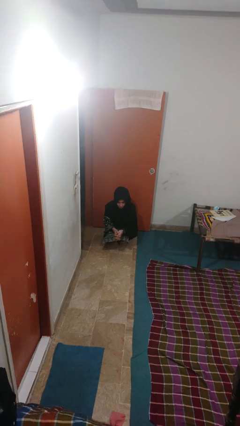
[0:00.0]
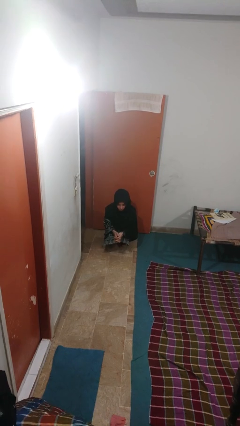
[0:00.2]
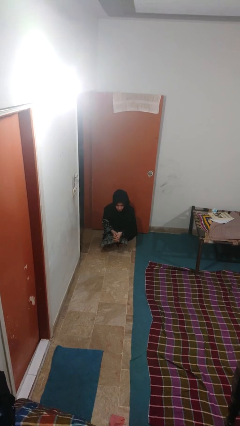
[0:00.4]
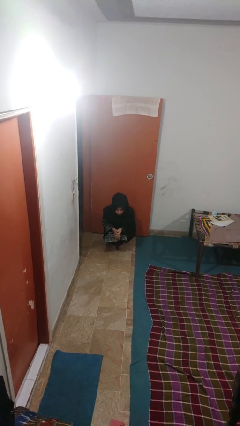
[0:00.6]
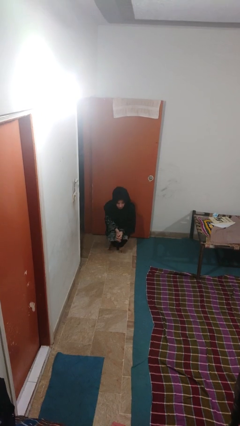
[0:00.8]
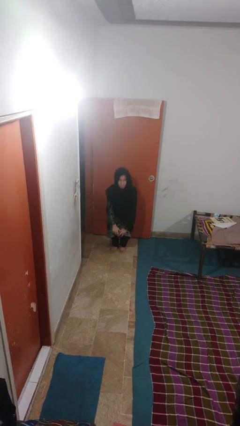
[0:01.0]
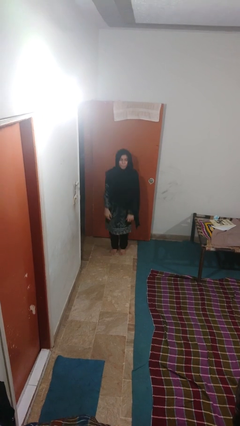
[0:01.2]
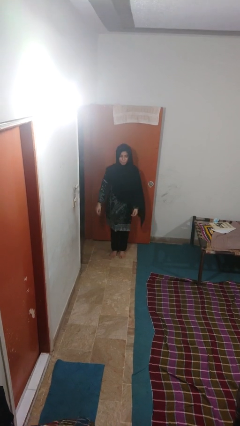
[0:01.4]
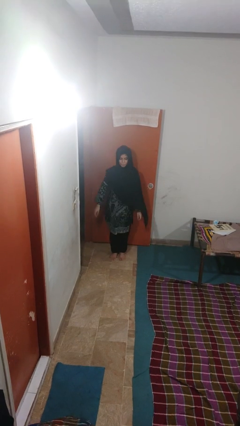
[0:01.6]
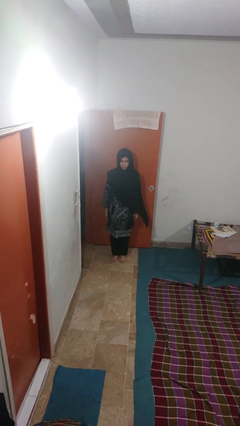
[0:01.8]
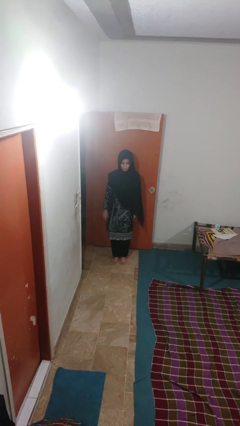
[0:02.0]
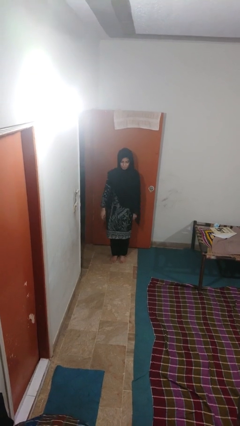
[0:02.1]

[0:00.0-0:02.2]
person stands up

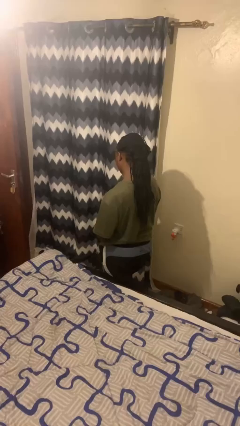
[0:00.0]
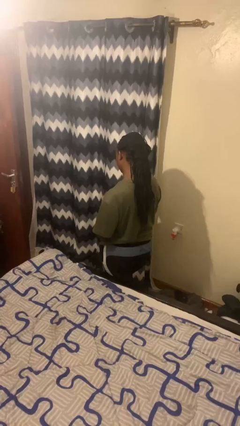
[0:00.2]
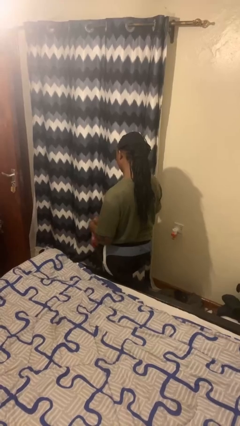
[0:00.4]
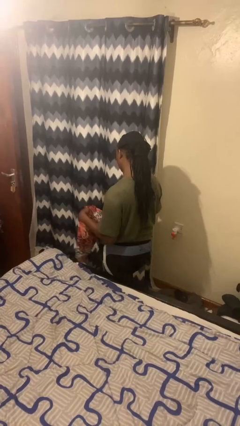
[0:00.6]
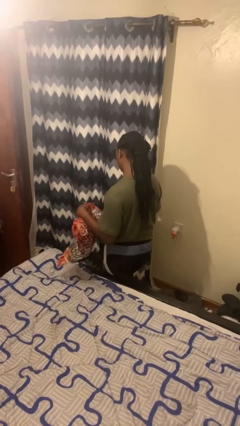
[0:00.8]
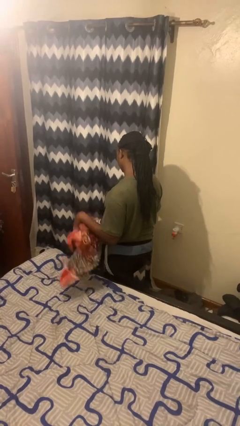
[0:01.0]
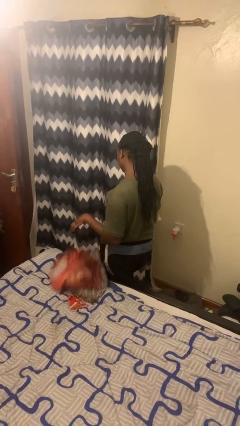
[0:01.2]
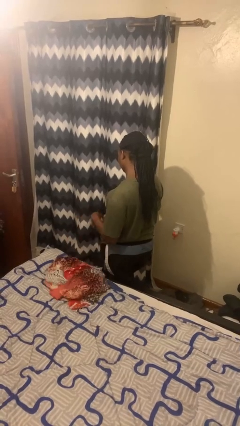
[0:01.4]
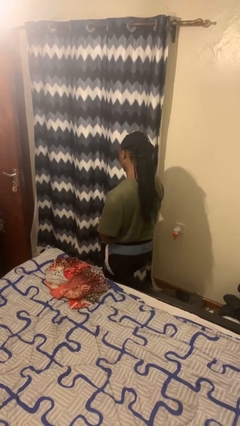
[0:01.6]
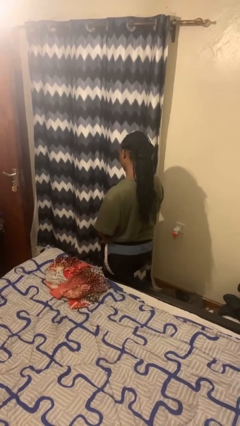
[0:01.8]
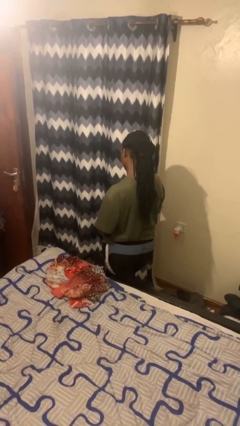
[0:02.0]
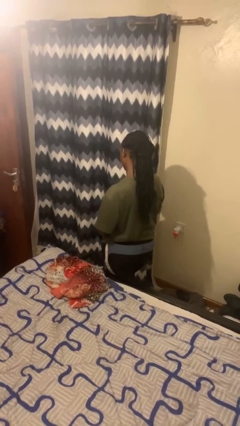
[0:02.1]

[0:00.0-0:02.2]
person throws object on bed

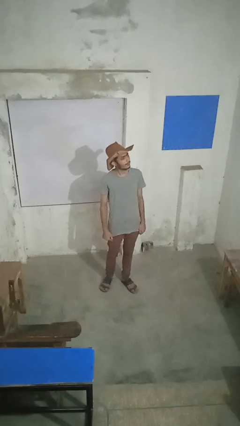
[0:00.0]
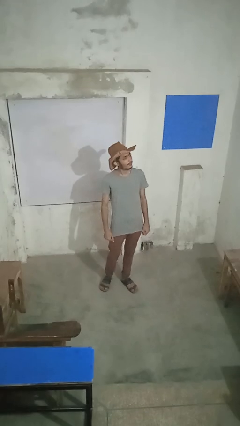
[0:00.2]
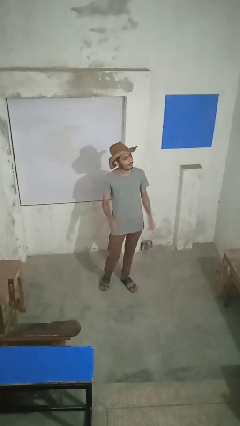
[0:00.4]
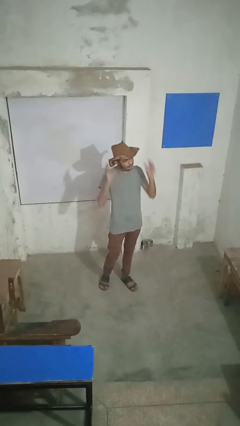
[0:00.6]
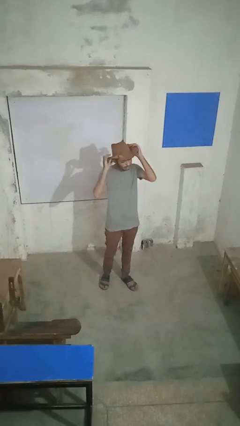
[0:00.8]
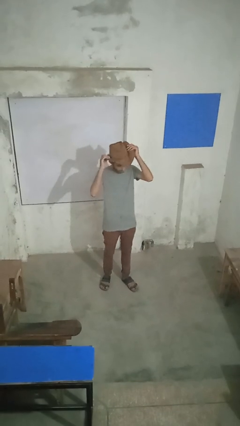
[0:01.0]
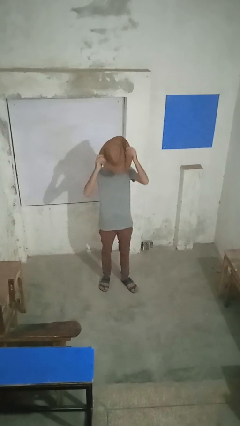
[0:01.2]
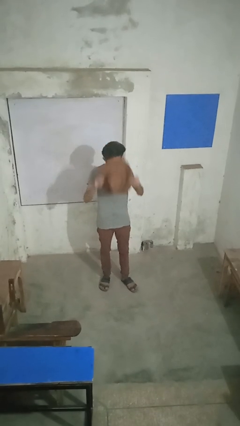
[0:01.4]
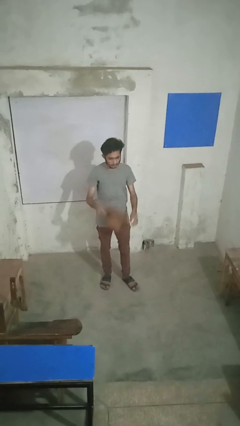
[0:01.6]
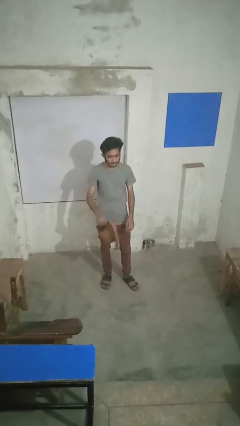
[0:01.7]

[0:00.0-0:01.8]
person takes off hat

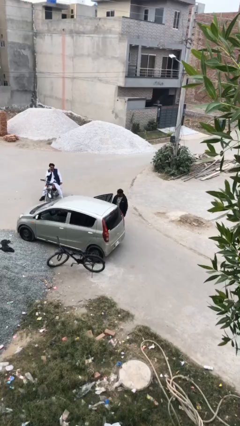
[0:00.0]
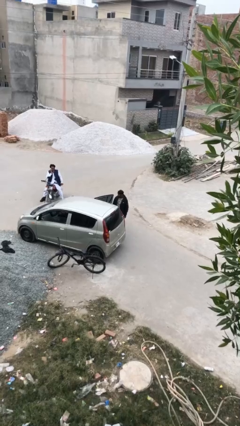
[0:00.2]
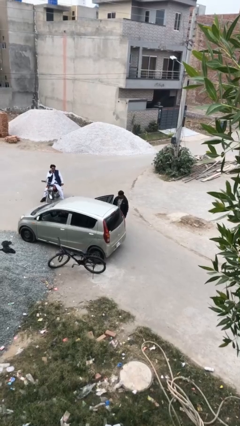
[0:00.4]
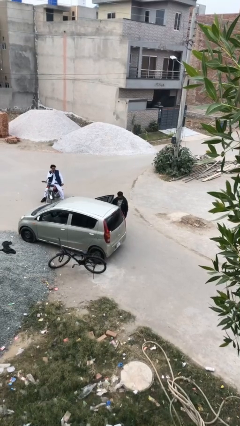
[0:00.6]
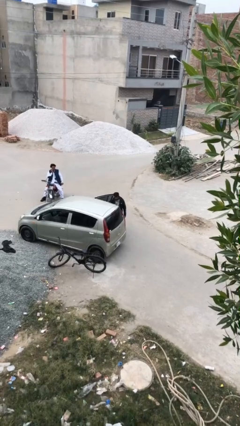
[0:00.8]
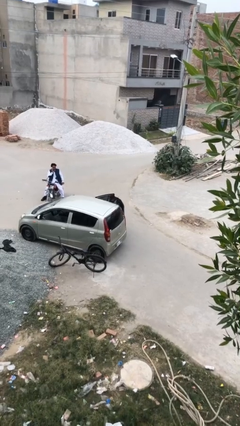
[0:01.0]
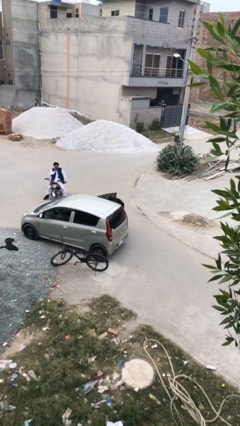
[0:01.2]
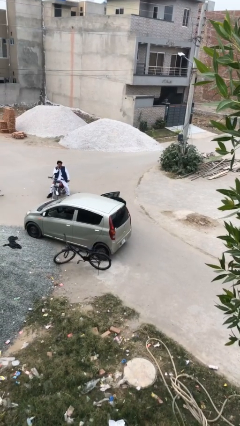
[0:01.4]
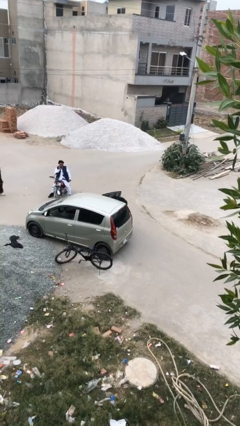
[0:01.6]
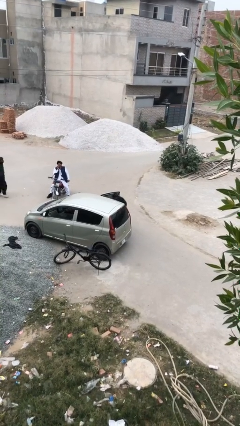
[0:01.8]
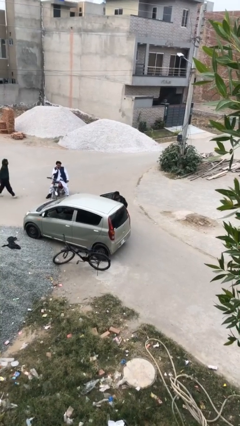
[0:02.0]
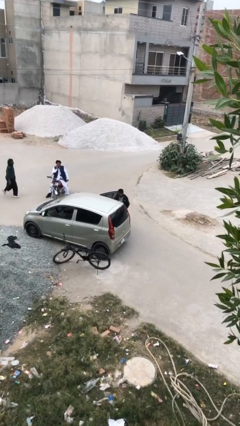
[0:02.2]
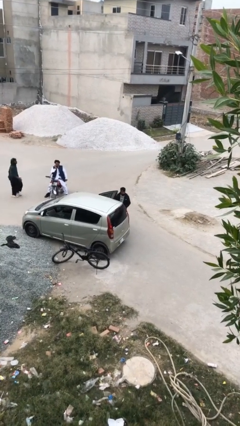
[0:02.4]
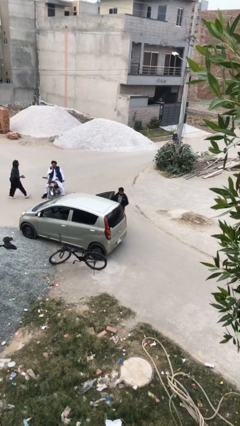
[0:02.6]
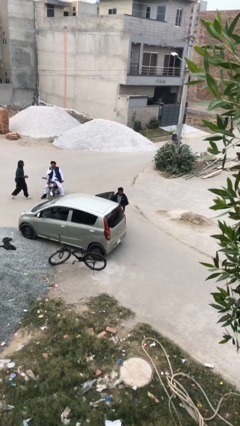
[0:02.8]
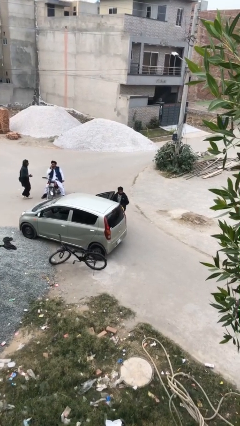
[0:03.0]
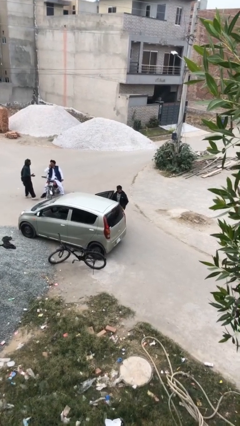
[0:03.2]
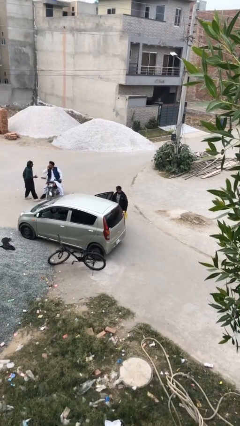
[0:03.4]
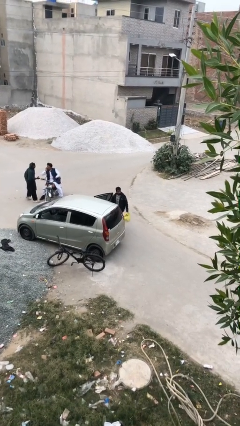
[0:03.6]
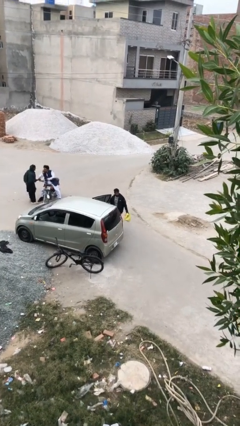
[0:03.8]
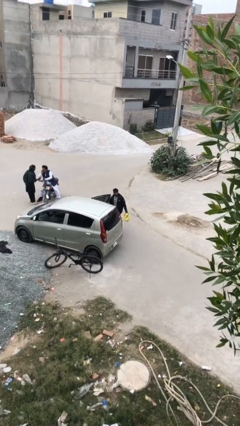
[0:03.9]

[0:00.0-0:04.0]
person unloads car

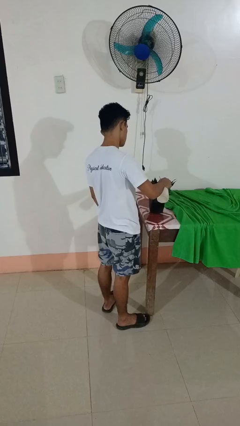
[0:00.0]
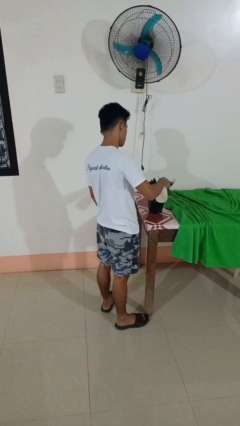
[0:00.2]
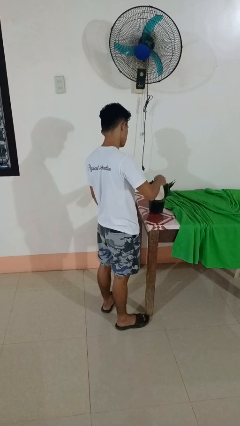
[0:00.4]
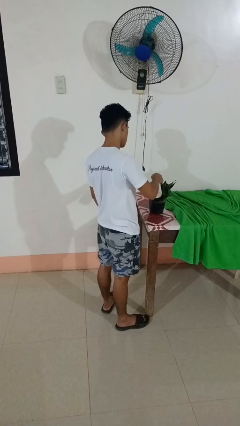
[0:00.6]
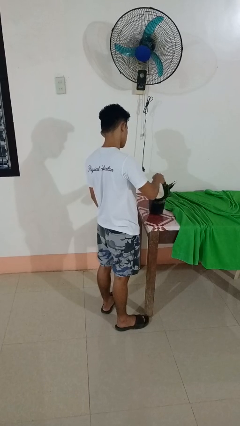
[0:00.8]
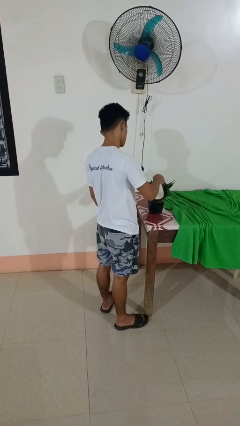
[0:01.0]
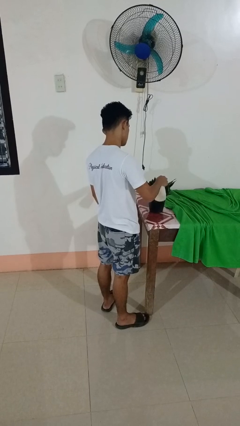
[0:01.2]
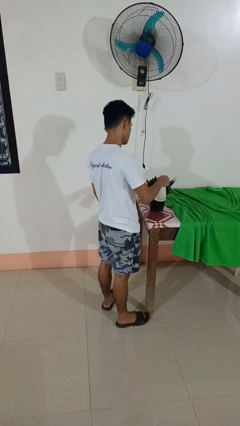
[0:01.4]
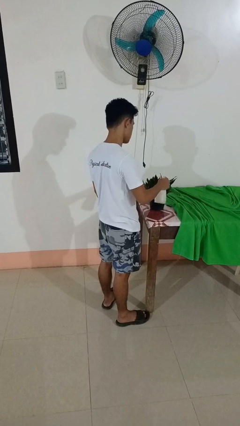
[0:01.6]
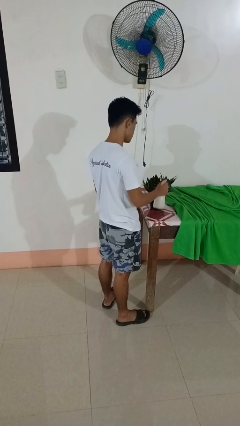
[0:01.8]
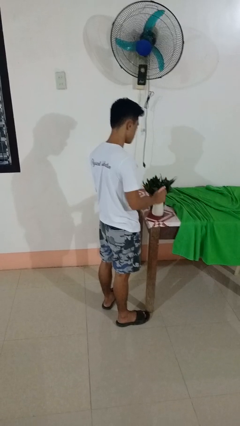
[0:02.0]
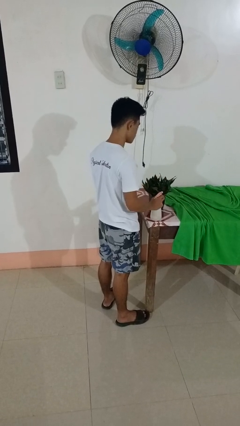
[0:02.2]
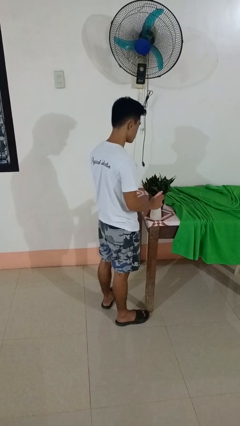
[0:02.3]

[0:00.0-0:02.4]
person waters houseplant

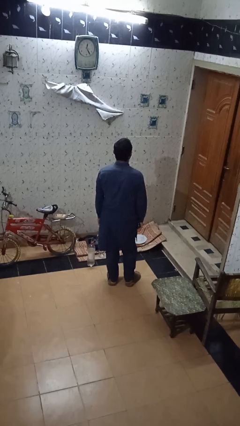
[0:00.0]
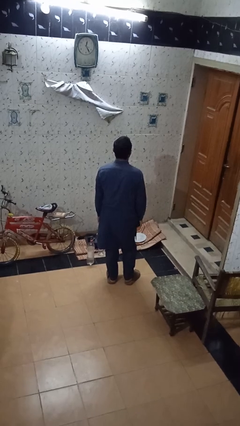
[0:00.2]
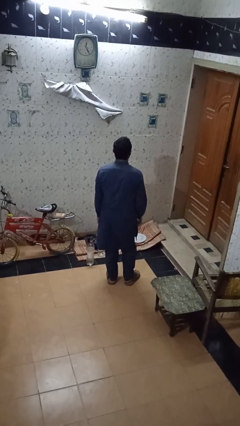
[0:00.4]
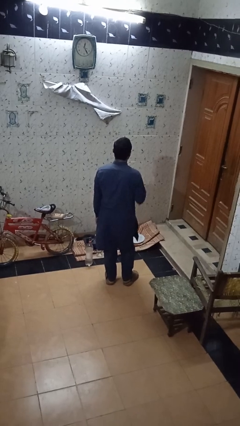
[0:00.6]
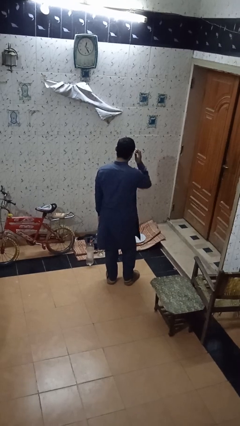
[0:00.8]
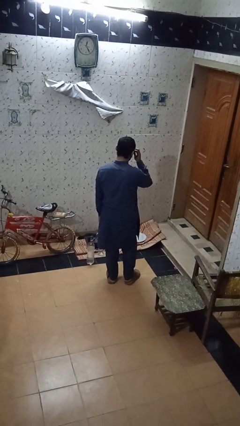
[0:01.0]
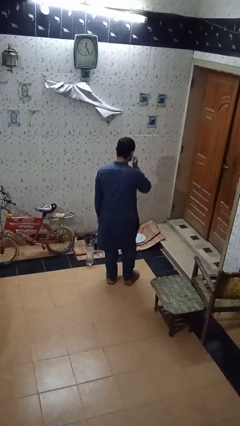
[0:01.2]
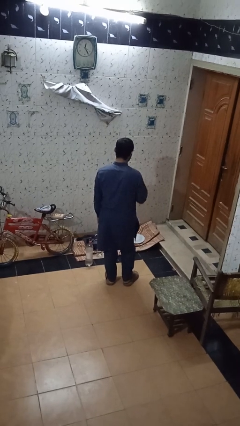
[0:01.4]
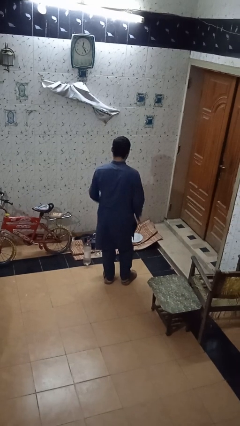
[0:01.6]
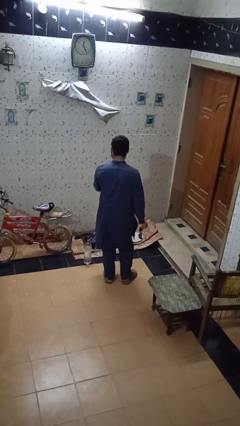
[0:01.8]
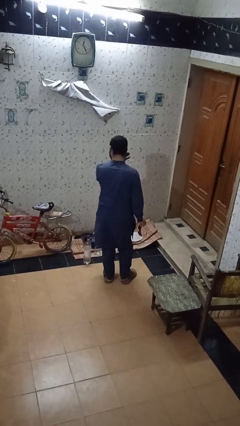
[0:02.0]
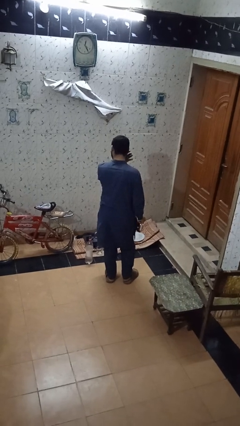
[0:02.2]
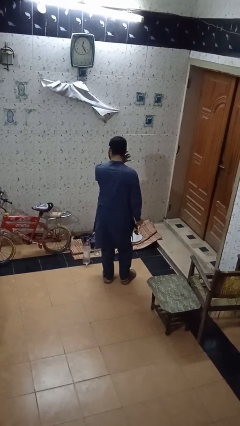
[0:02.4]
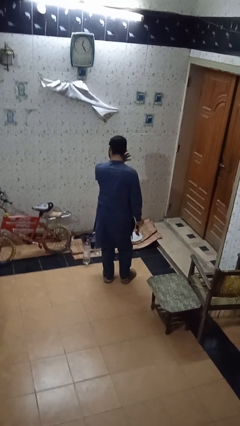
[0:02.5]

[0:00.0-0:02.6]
person takes off sunglasses

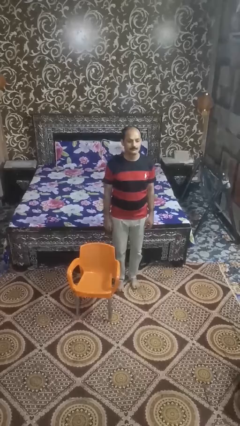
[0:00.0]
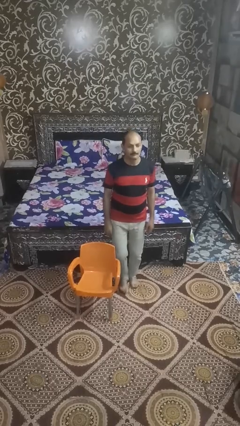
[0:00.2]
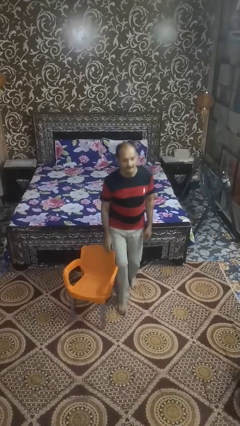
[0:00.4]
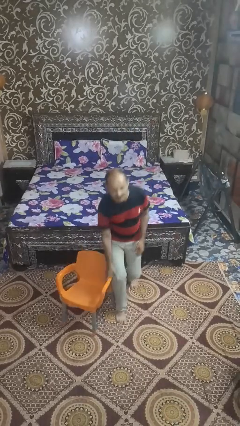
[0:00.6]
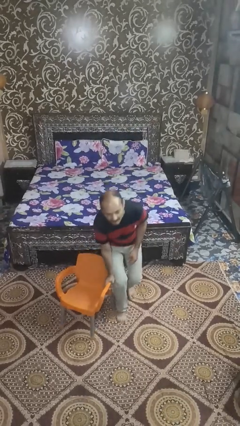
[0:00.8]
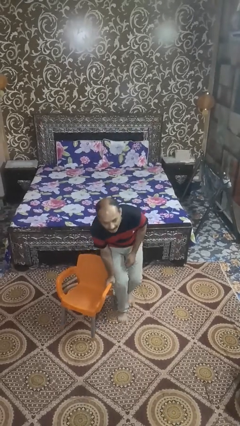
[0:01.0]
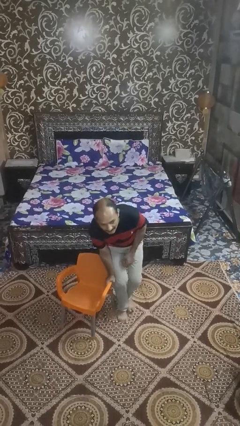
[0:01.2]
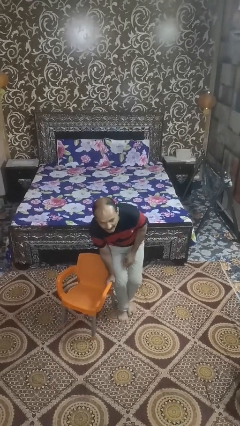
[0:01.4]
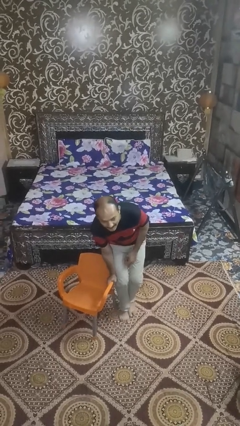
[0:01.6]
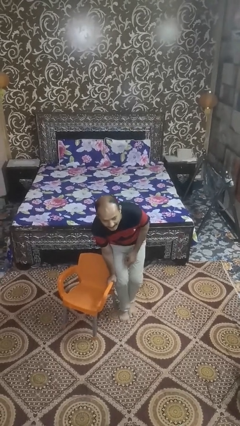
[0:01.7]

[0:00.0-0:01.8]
person trips on object on floor
